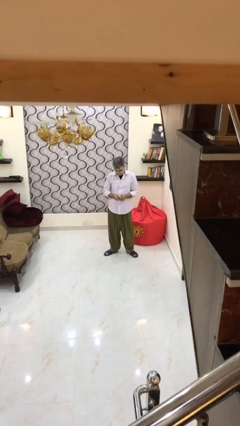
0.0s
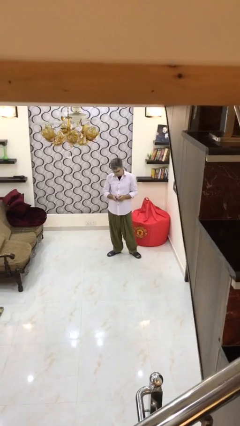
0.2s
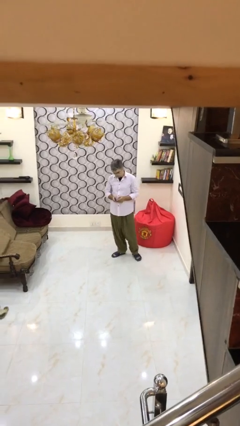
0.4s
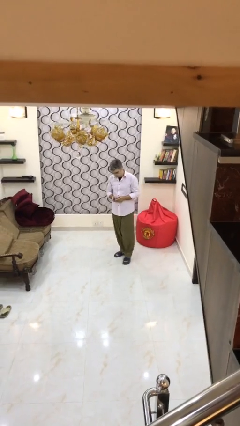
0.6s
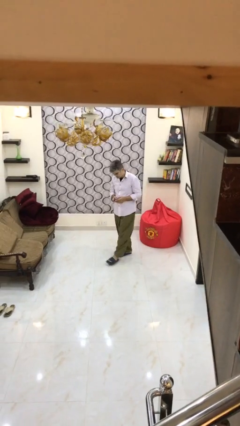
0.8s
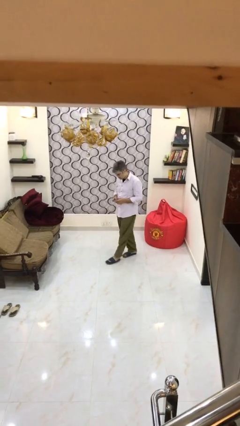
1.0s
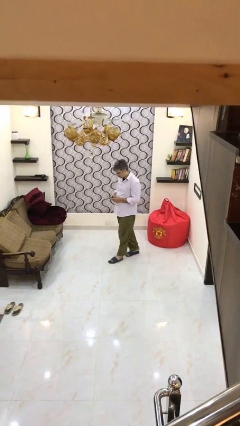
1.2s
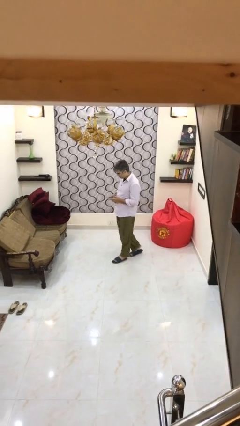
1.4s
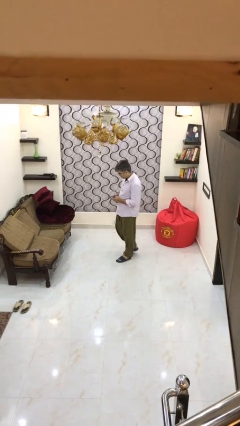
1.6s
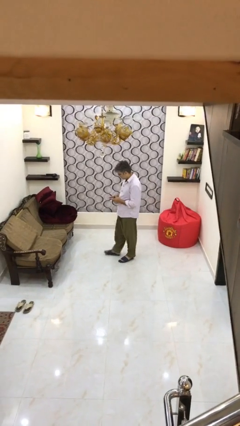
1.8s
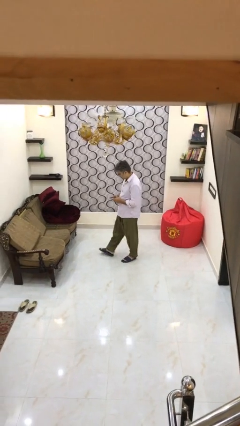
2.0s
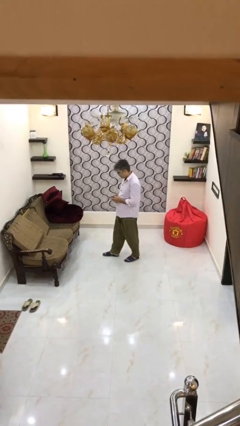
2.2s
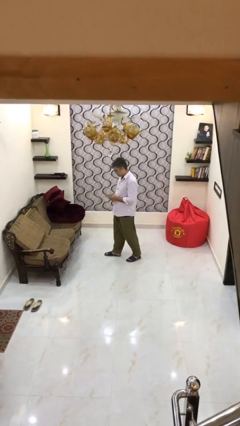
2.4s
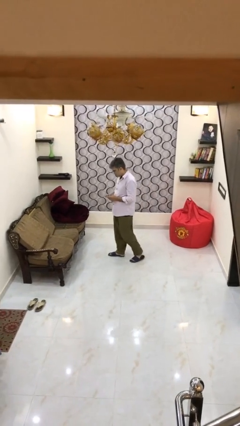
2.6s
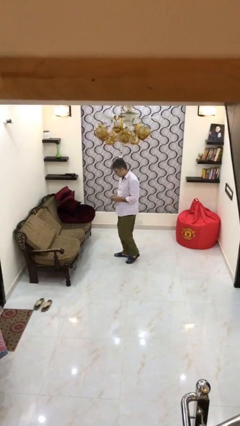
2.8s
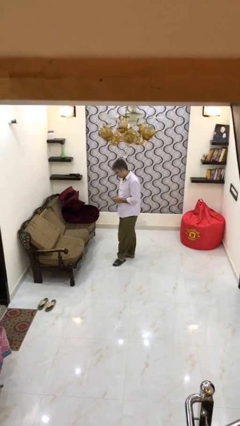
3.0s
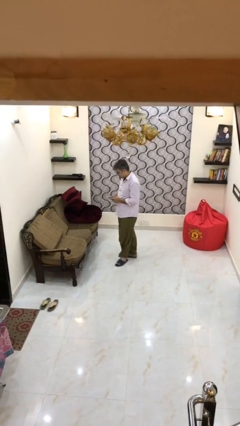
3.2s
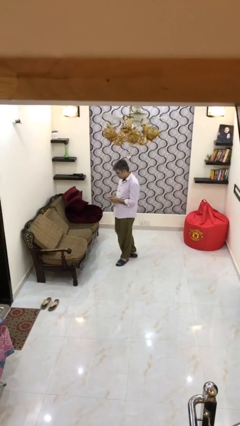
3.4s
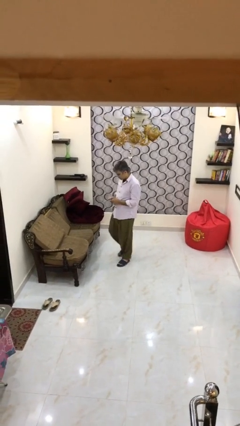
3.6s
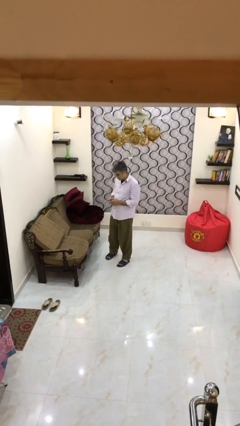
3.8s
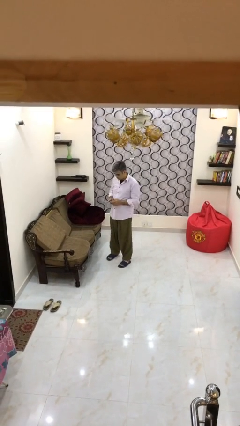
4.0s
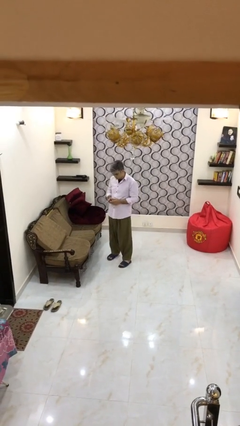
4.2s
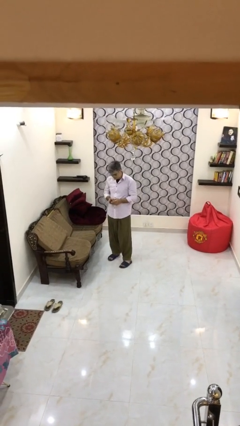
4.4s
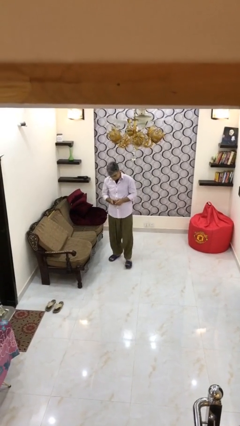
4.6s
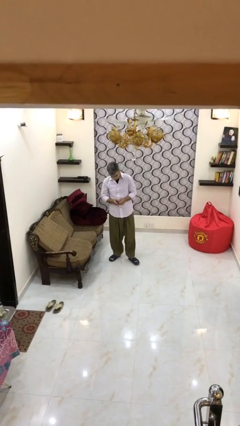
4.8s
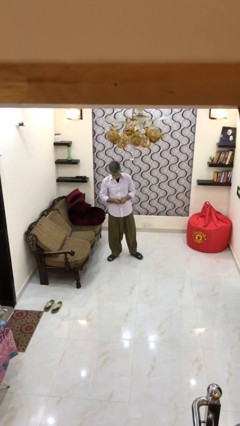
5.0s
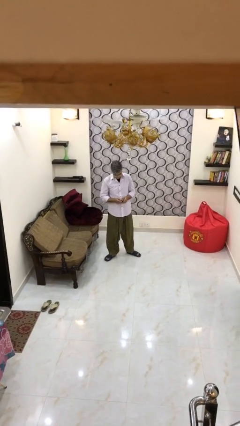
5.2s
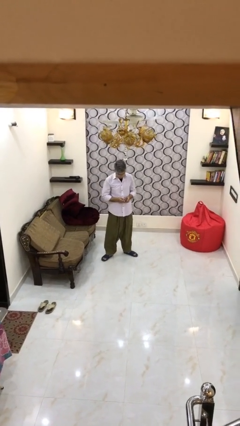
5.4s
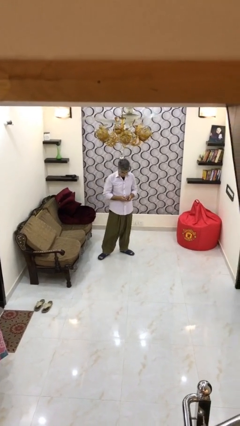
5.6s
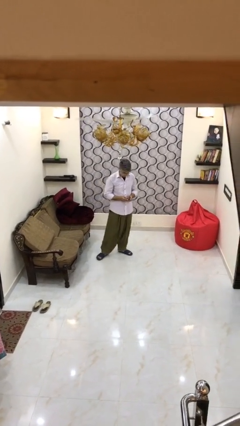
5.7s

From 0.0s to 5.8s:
person texts on phone

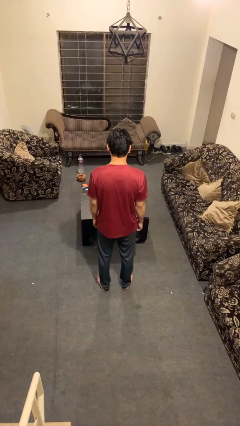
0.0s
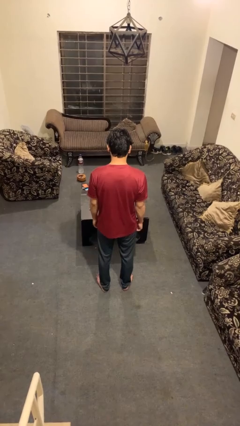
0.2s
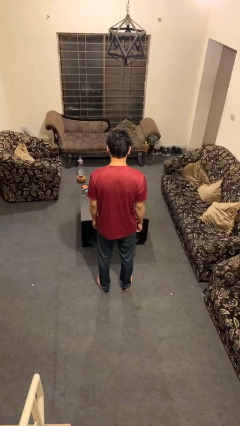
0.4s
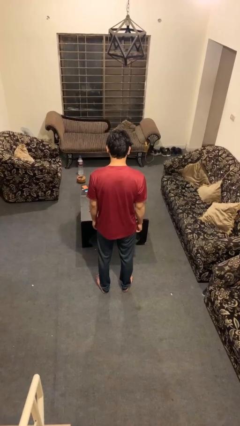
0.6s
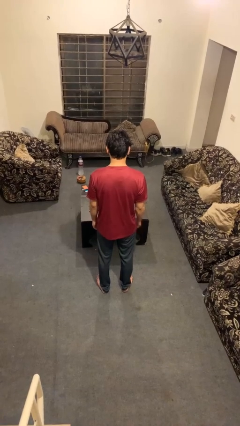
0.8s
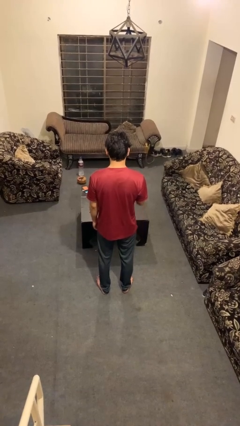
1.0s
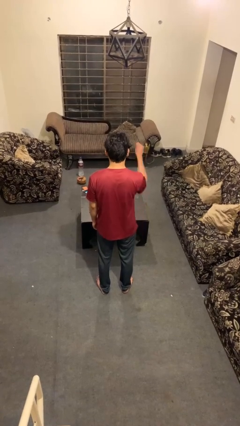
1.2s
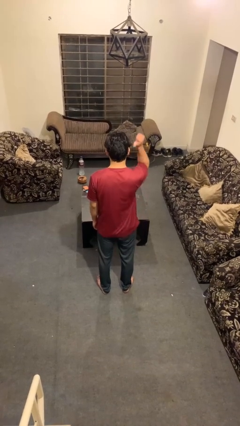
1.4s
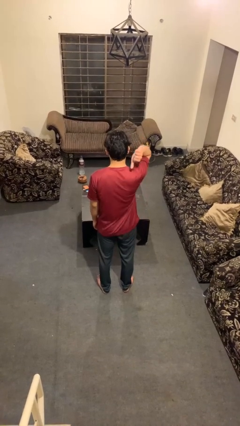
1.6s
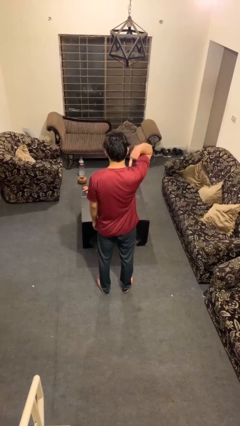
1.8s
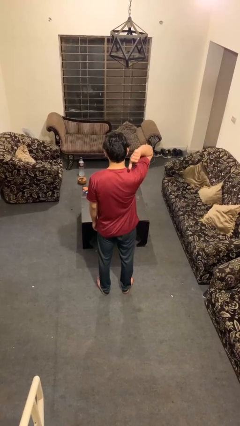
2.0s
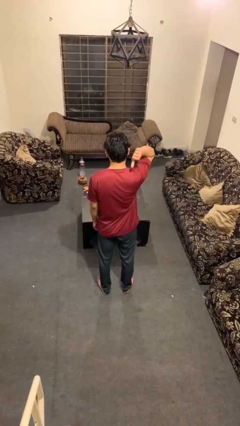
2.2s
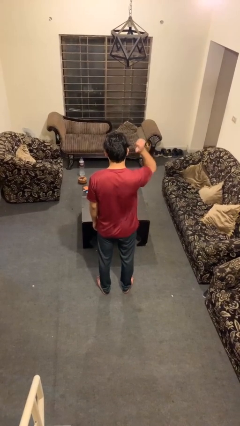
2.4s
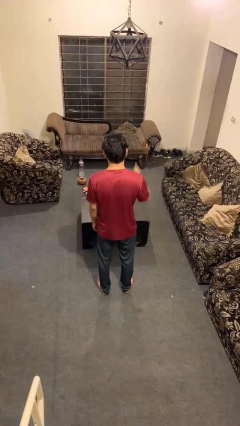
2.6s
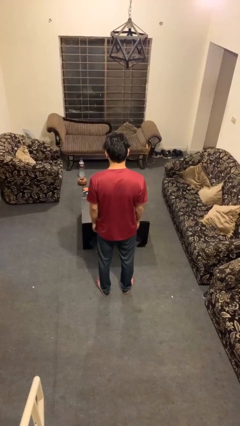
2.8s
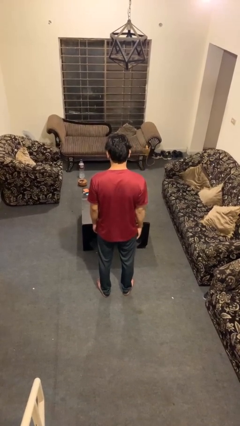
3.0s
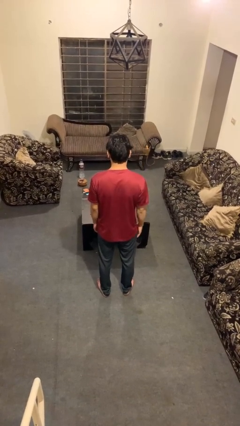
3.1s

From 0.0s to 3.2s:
person gestures behind me

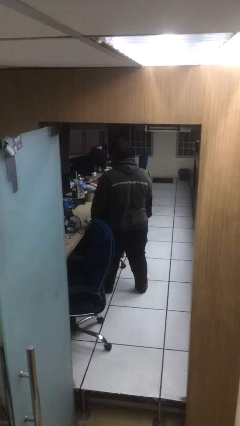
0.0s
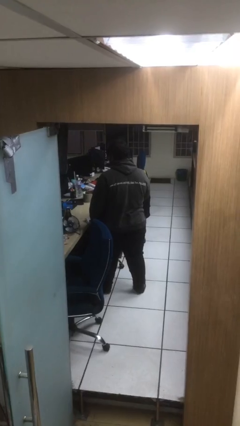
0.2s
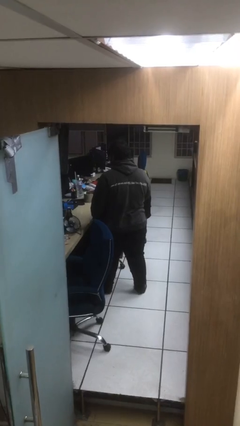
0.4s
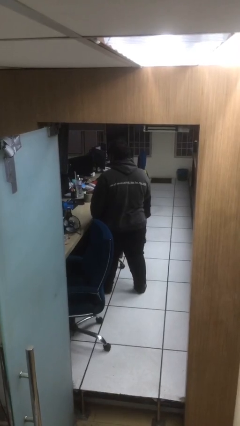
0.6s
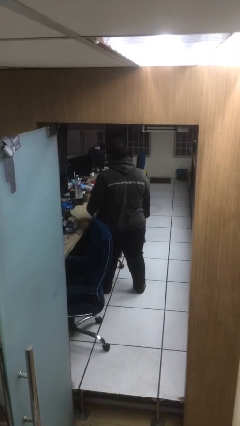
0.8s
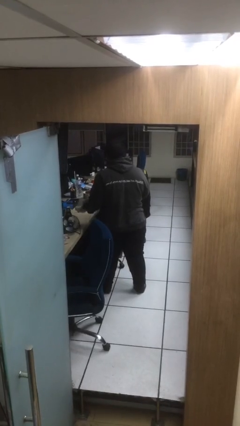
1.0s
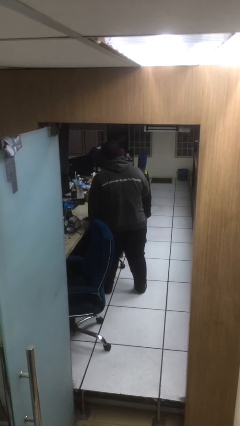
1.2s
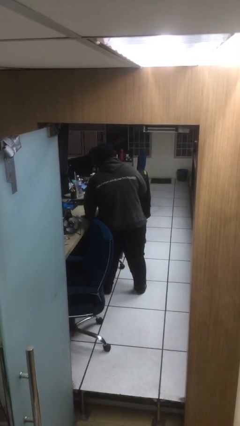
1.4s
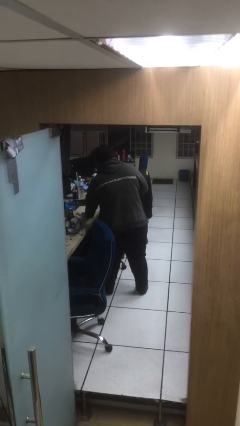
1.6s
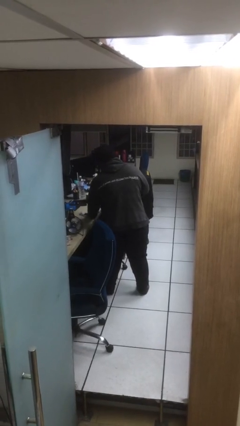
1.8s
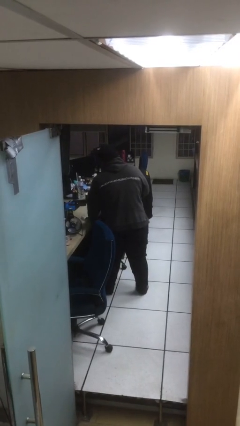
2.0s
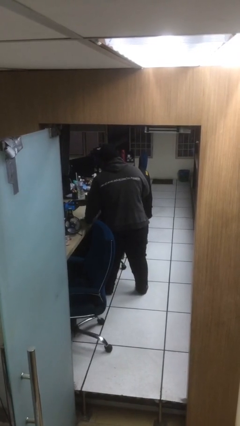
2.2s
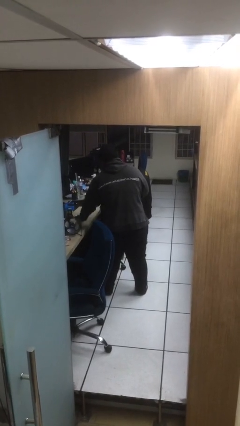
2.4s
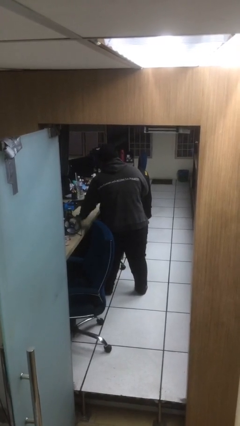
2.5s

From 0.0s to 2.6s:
person cleans table with rag

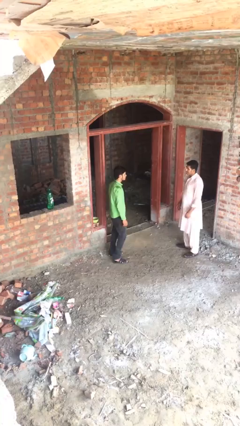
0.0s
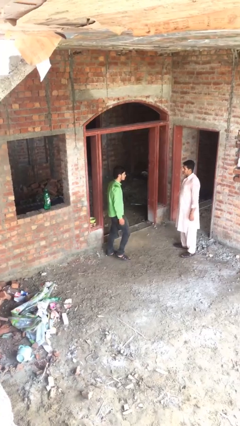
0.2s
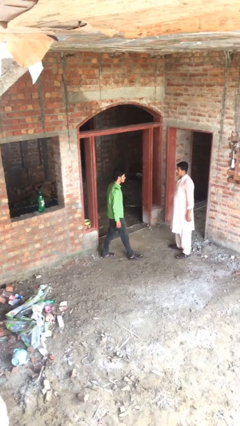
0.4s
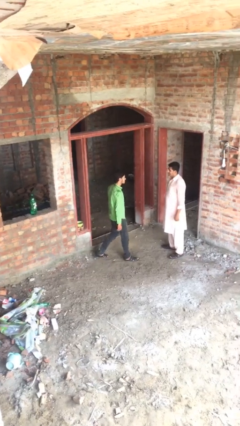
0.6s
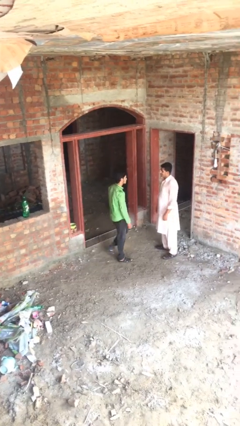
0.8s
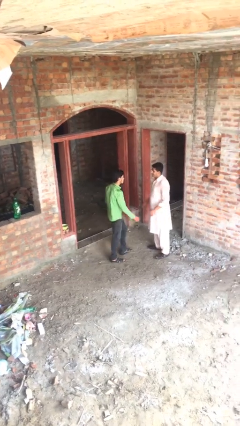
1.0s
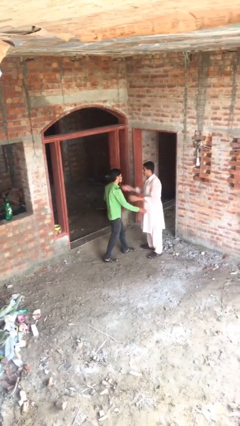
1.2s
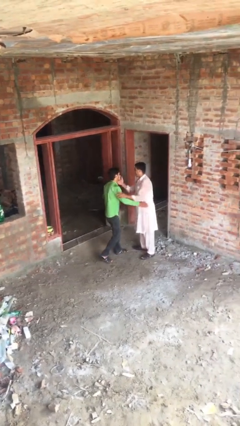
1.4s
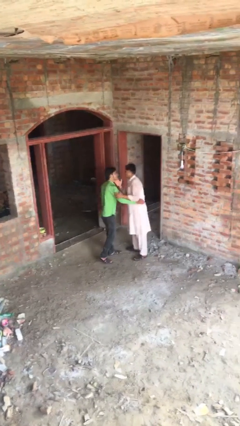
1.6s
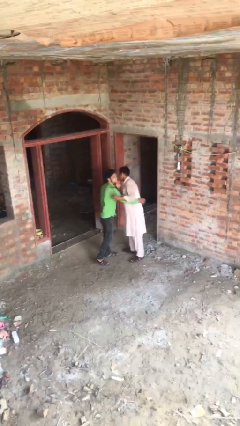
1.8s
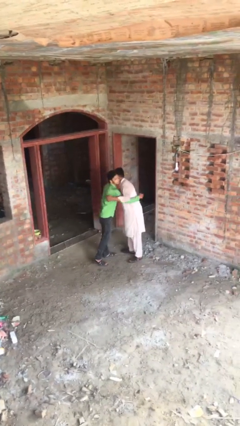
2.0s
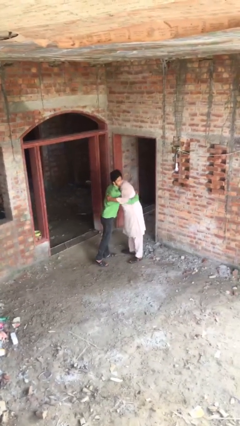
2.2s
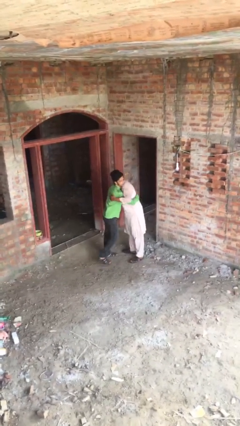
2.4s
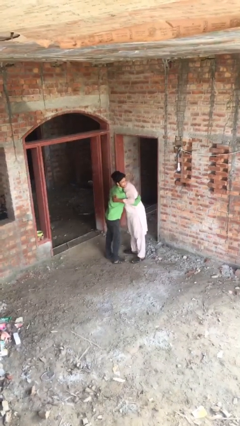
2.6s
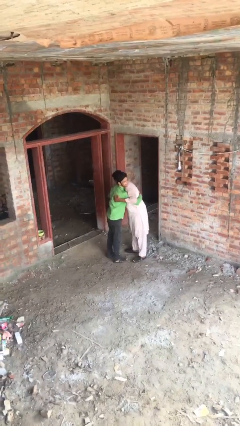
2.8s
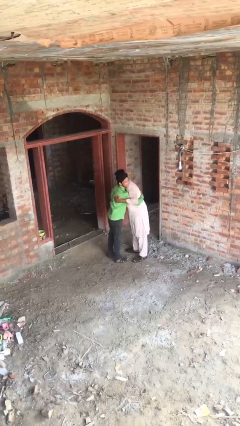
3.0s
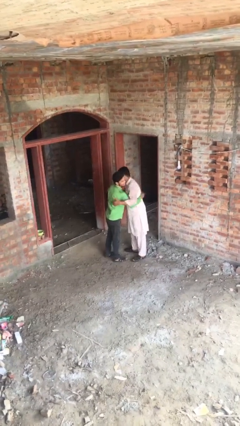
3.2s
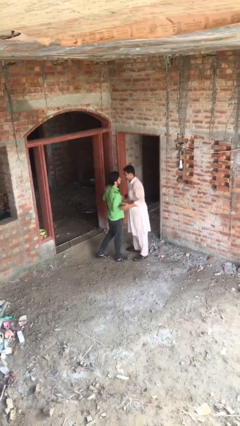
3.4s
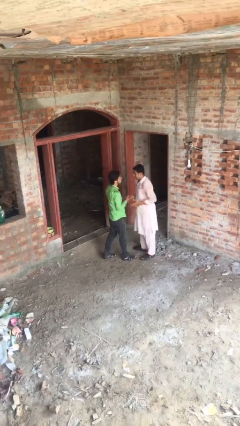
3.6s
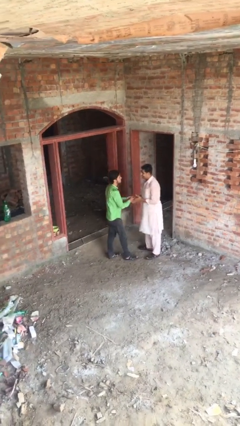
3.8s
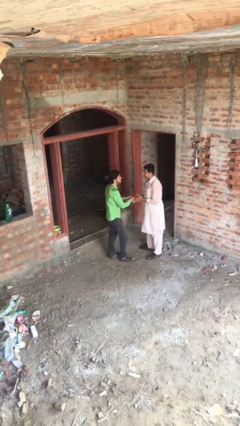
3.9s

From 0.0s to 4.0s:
person embraces person

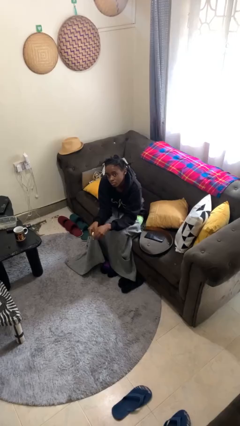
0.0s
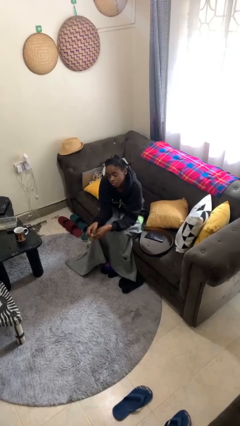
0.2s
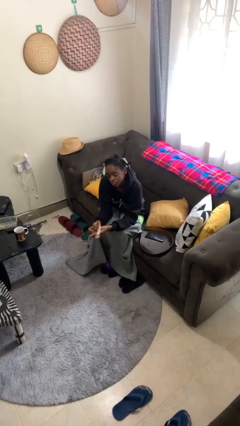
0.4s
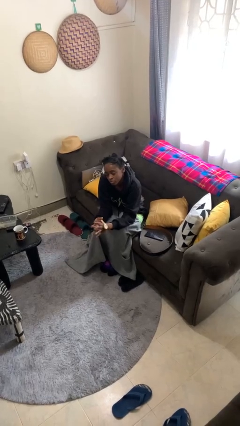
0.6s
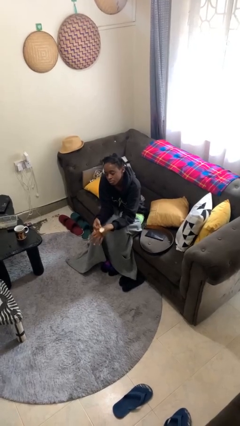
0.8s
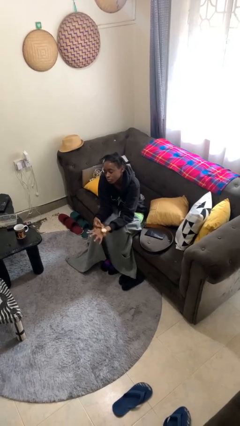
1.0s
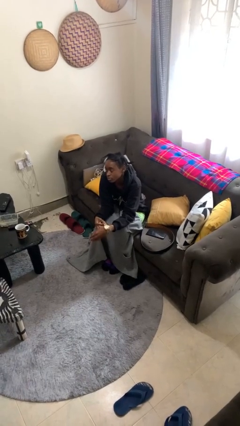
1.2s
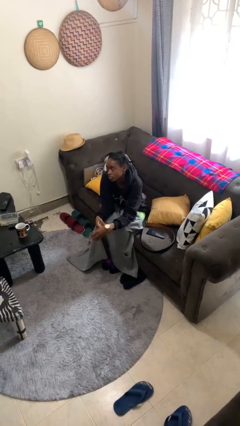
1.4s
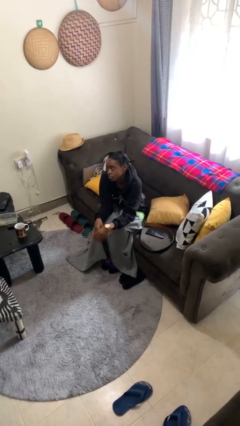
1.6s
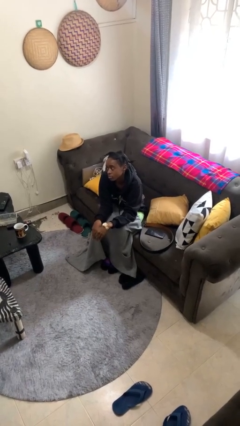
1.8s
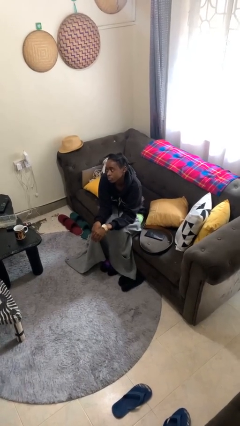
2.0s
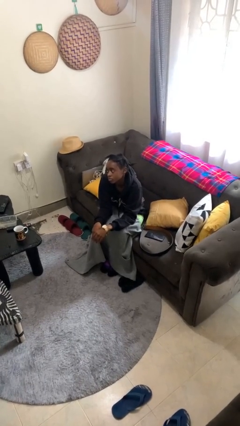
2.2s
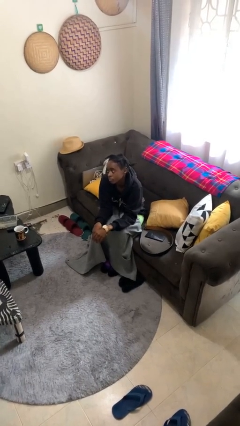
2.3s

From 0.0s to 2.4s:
person puts on wristwatch
